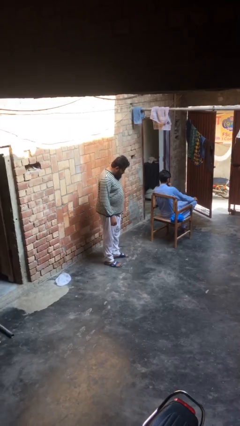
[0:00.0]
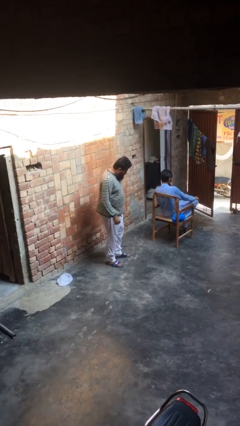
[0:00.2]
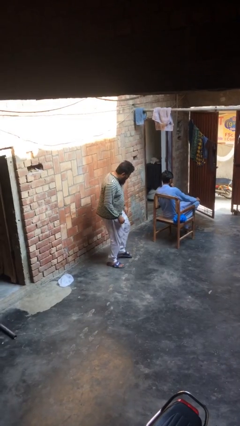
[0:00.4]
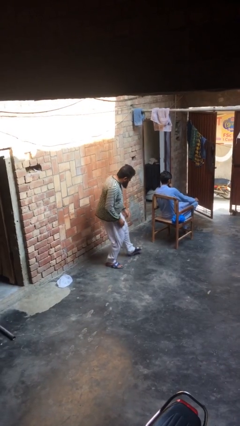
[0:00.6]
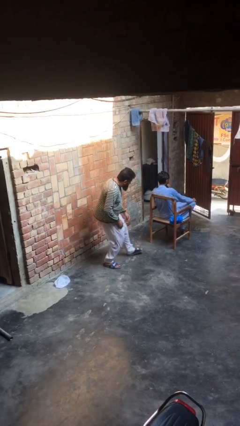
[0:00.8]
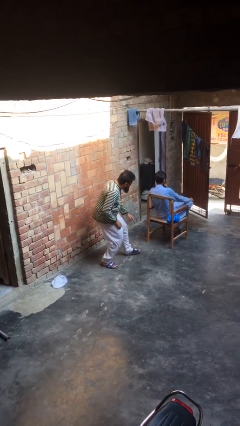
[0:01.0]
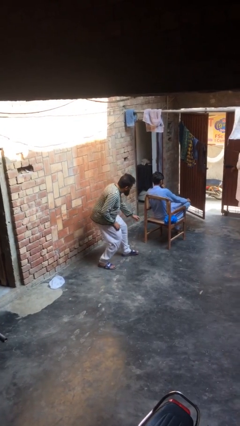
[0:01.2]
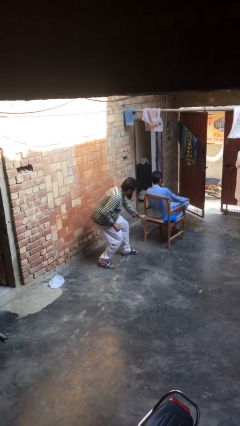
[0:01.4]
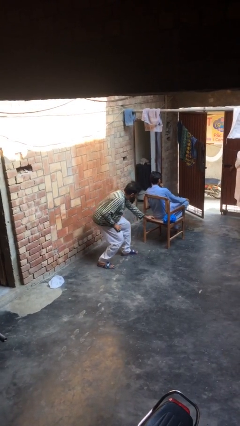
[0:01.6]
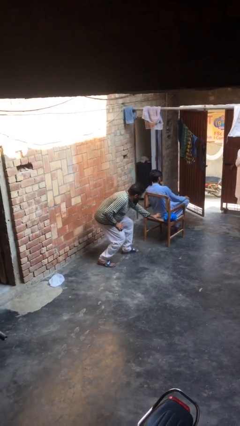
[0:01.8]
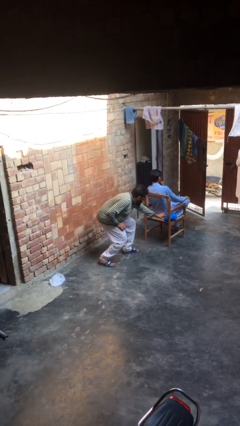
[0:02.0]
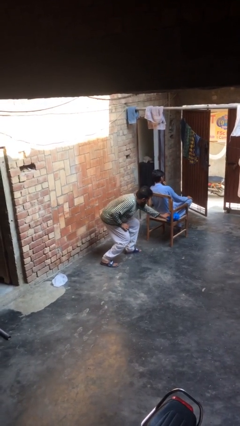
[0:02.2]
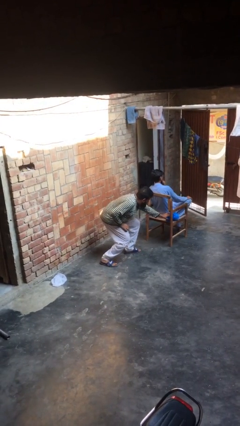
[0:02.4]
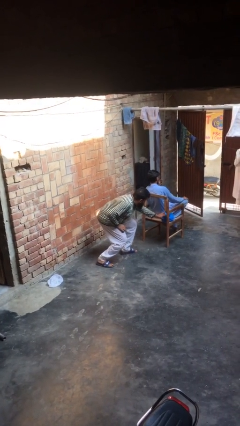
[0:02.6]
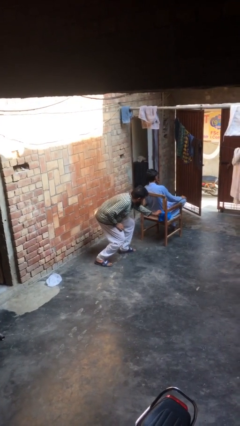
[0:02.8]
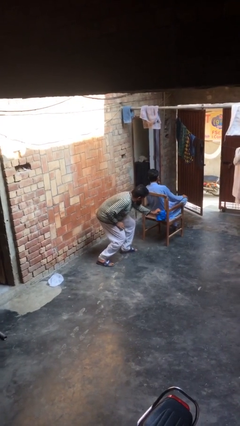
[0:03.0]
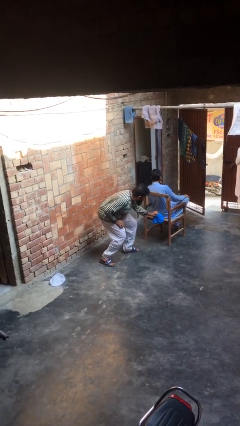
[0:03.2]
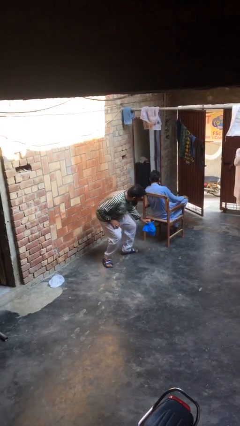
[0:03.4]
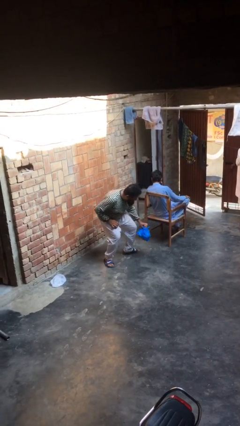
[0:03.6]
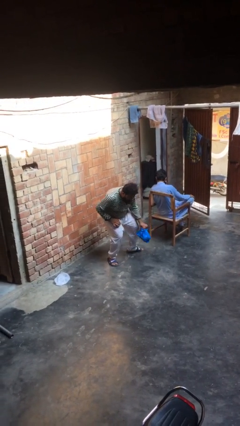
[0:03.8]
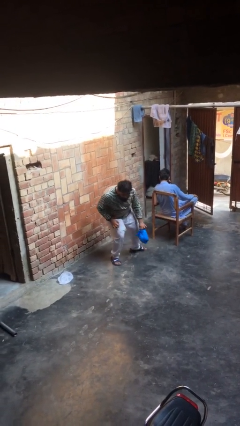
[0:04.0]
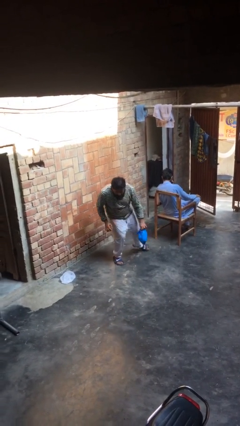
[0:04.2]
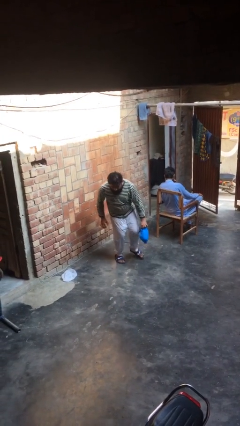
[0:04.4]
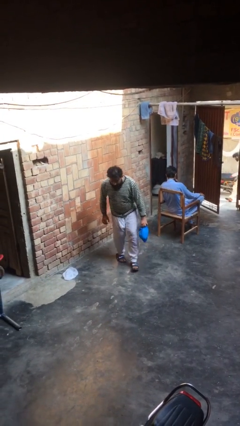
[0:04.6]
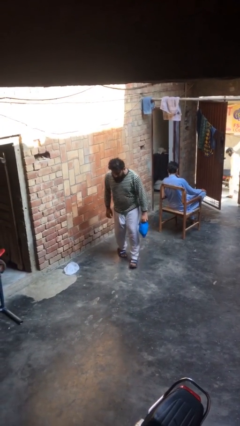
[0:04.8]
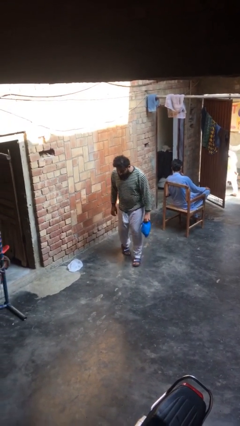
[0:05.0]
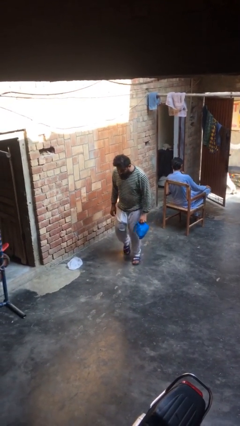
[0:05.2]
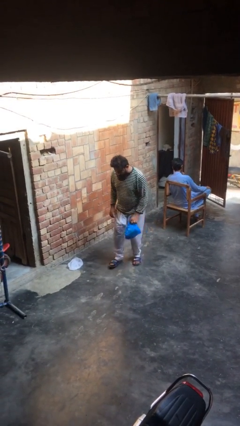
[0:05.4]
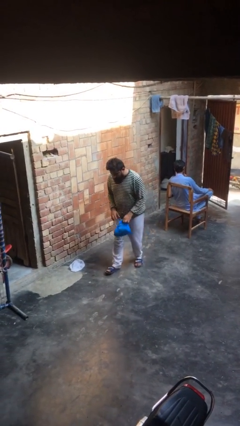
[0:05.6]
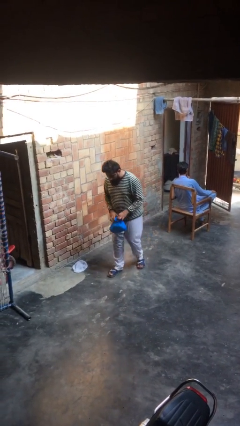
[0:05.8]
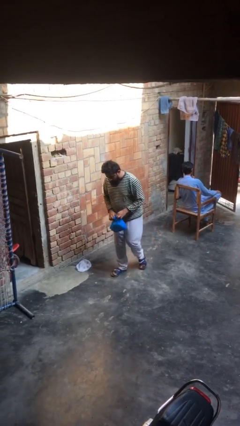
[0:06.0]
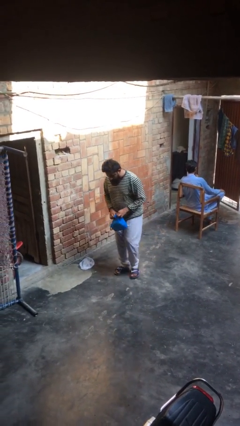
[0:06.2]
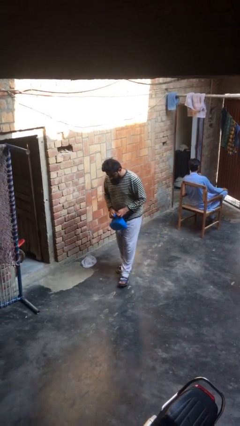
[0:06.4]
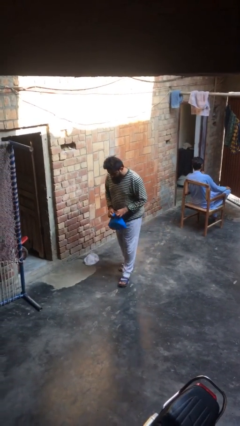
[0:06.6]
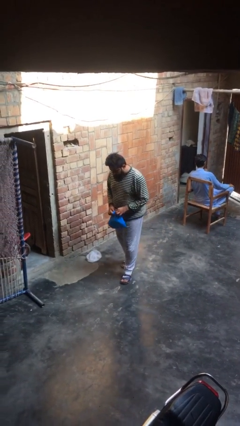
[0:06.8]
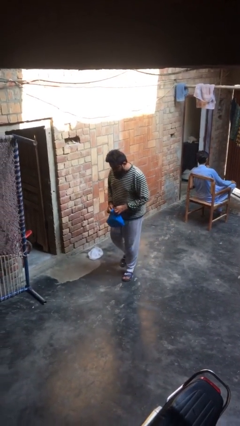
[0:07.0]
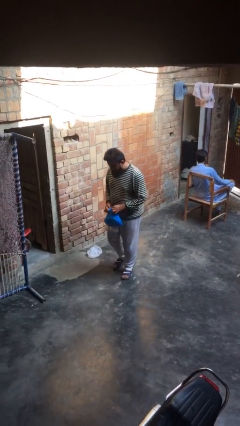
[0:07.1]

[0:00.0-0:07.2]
person steals object from person

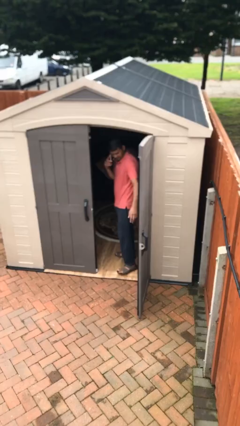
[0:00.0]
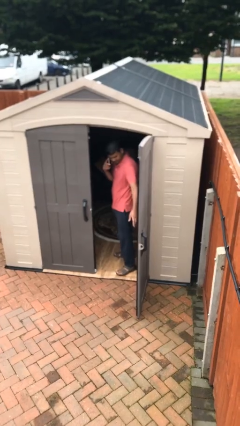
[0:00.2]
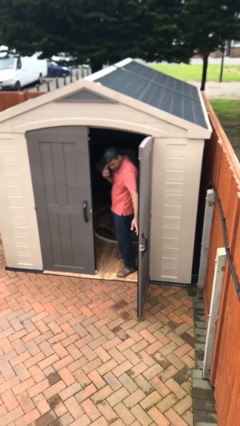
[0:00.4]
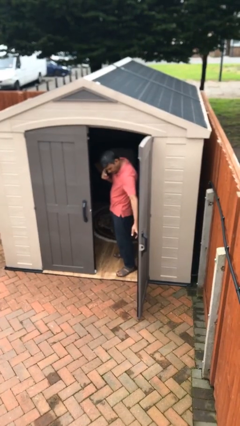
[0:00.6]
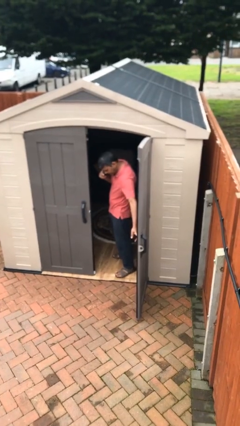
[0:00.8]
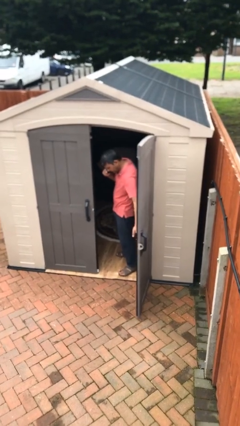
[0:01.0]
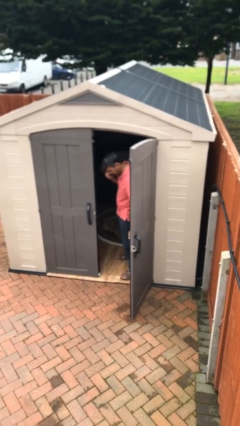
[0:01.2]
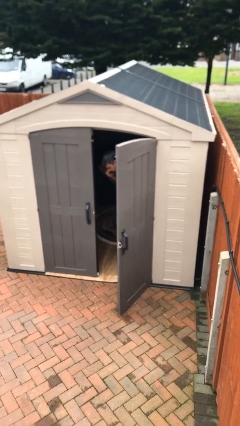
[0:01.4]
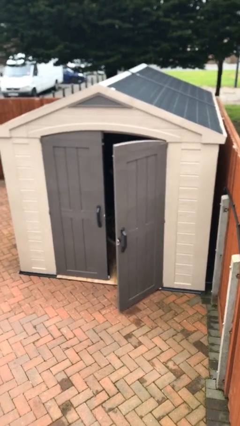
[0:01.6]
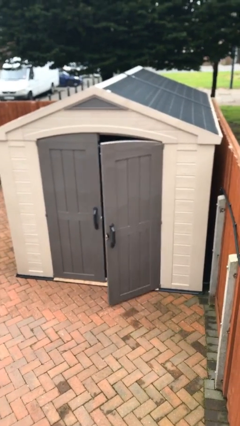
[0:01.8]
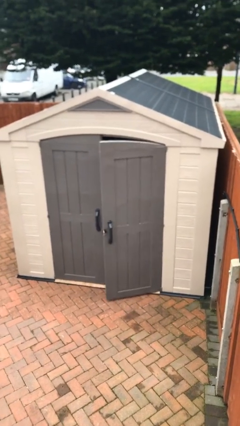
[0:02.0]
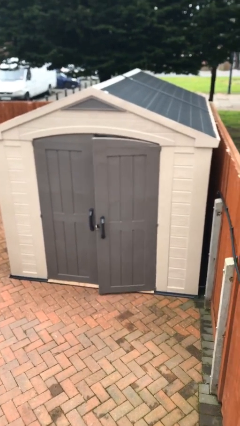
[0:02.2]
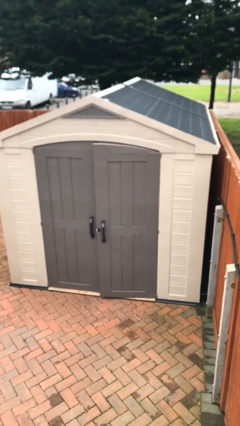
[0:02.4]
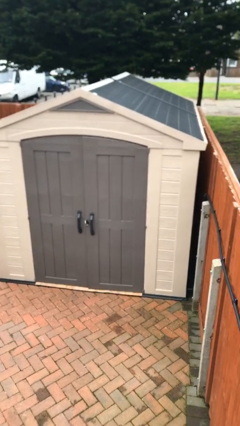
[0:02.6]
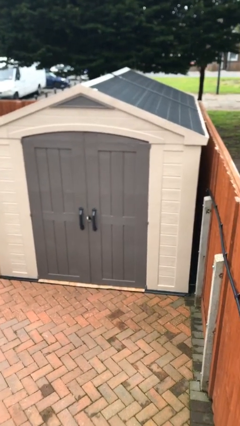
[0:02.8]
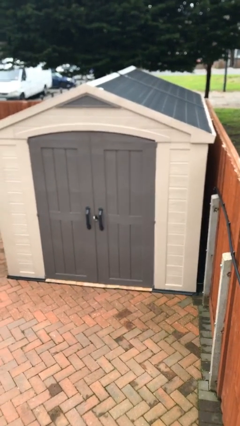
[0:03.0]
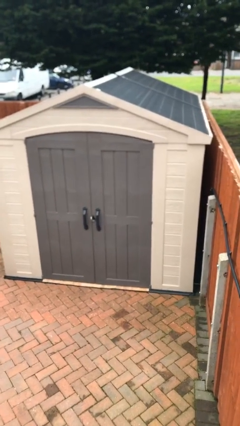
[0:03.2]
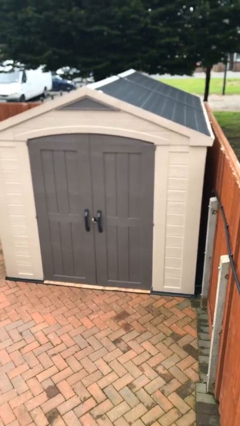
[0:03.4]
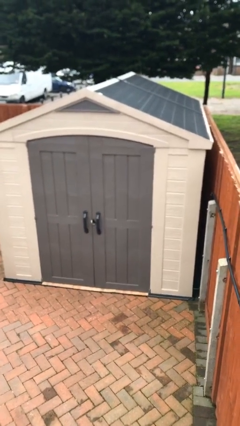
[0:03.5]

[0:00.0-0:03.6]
person closes facility door

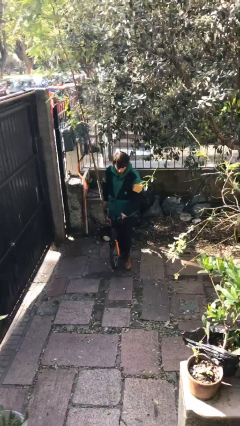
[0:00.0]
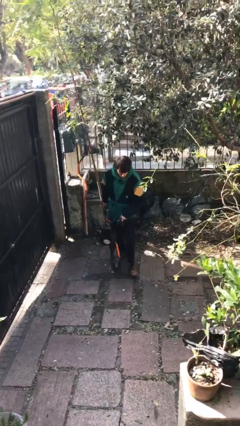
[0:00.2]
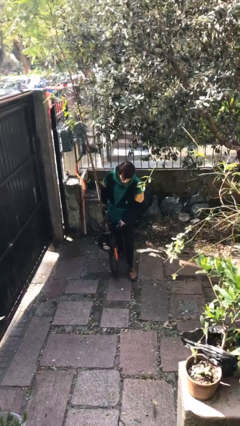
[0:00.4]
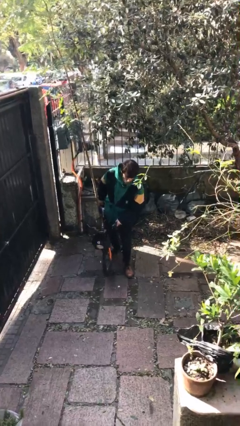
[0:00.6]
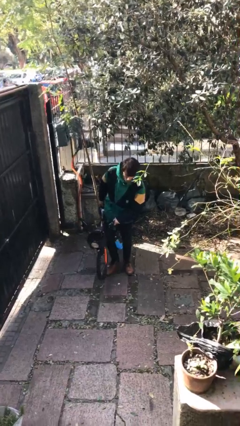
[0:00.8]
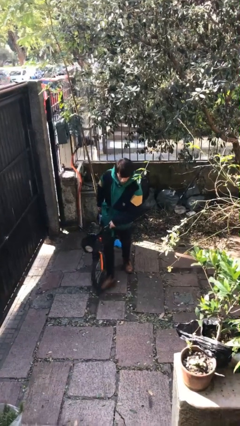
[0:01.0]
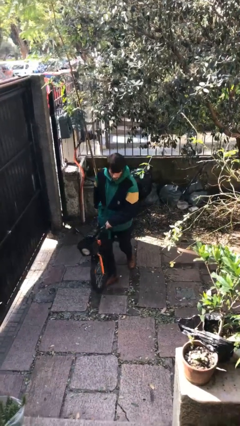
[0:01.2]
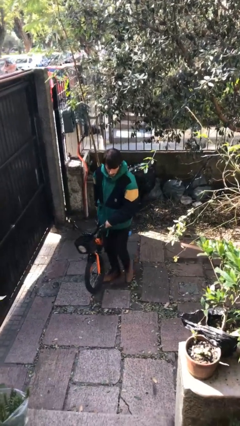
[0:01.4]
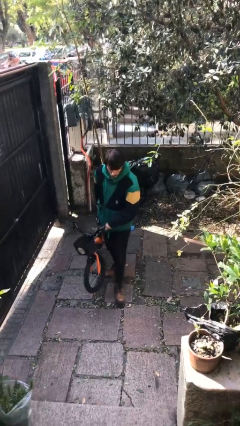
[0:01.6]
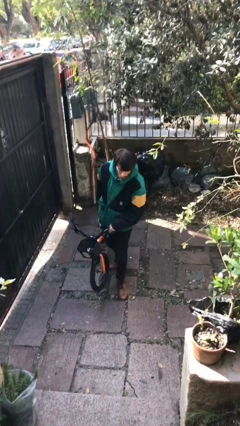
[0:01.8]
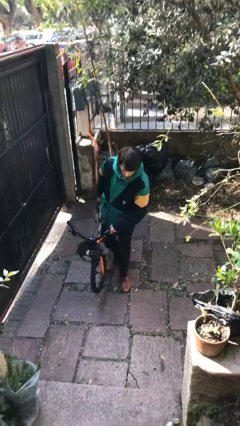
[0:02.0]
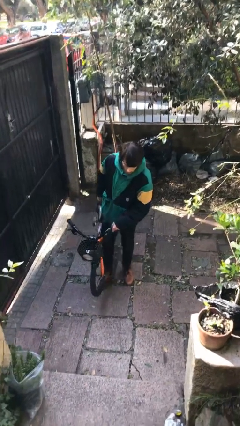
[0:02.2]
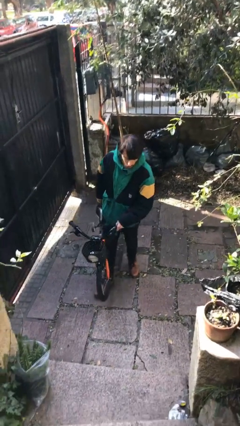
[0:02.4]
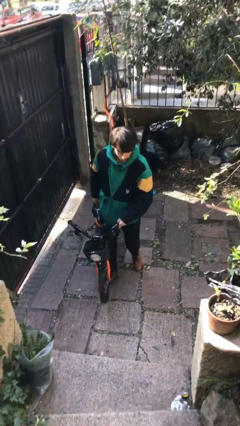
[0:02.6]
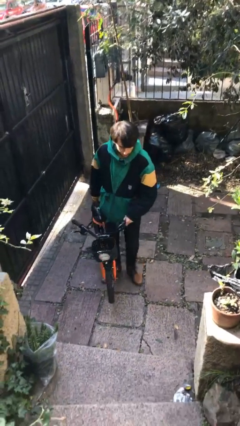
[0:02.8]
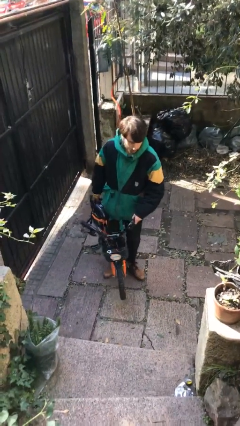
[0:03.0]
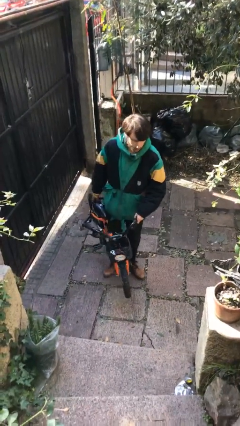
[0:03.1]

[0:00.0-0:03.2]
person carries bicycle

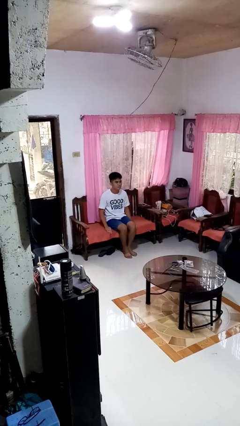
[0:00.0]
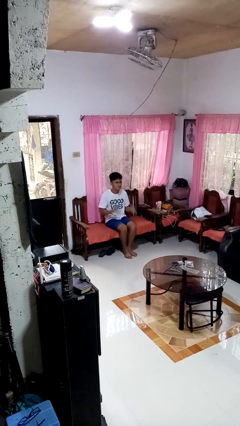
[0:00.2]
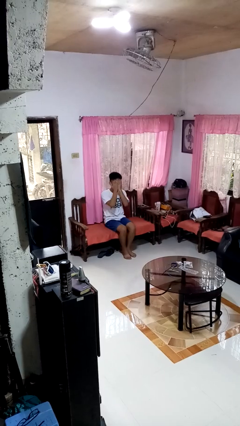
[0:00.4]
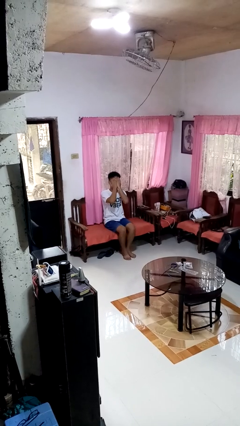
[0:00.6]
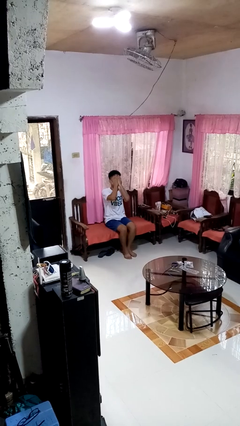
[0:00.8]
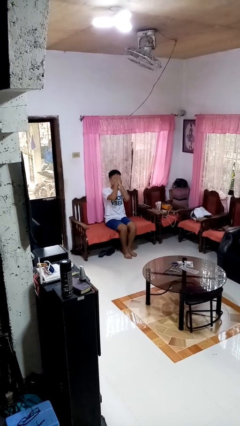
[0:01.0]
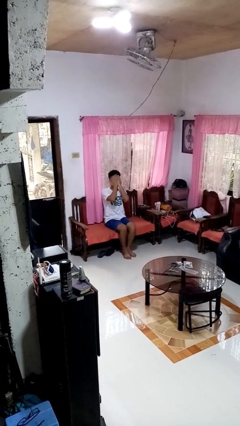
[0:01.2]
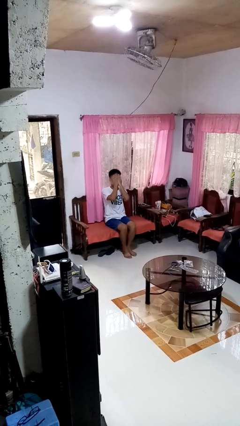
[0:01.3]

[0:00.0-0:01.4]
person covers face with hands

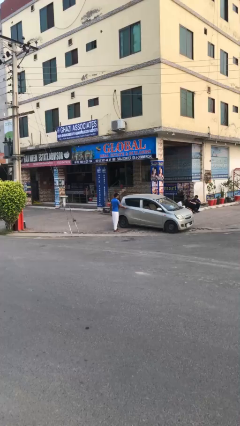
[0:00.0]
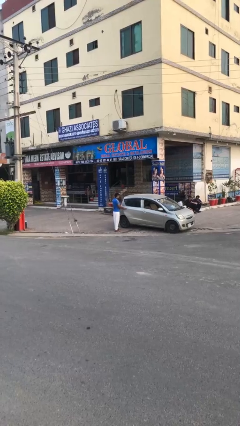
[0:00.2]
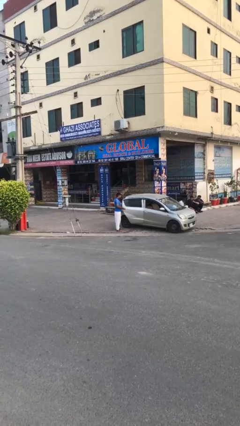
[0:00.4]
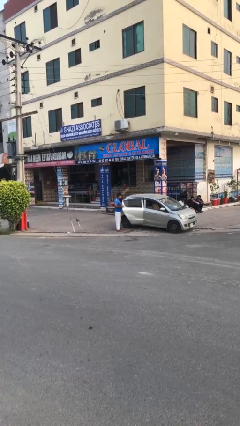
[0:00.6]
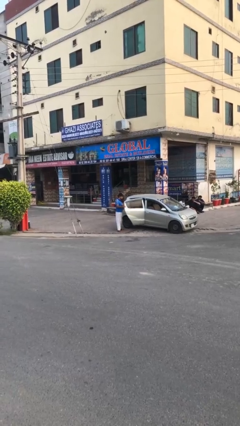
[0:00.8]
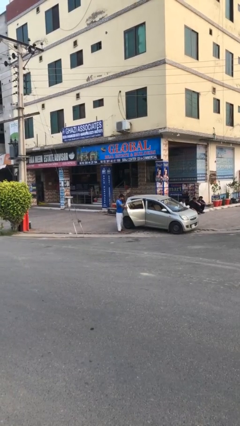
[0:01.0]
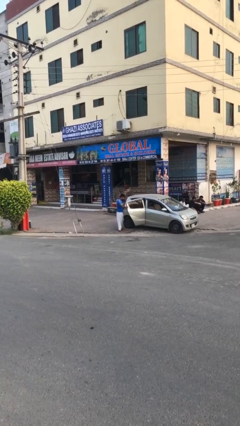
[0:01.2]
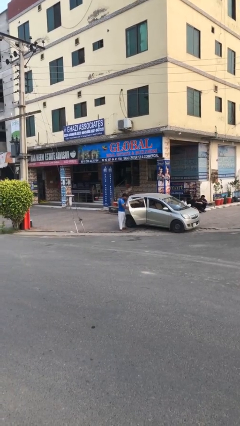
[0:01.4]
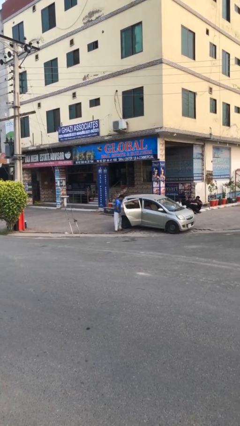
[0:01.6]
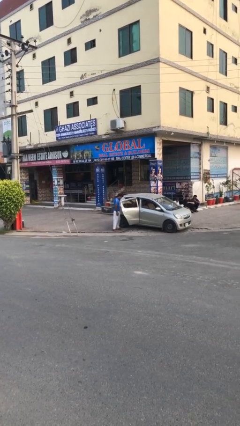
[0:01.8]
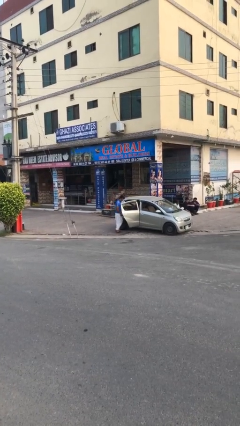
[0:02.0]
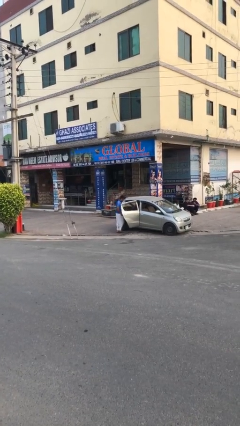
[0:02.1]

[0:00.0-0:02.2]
person opens car door
